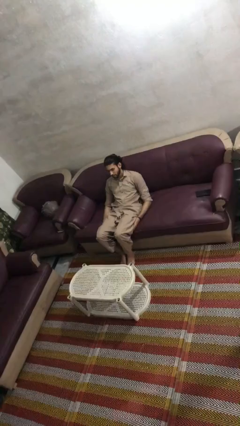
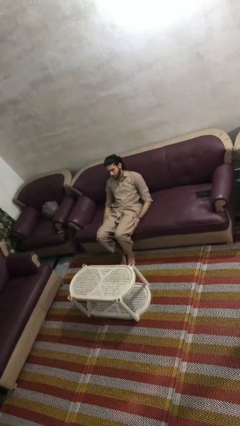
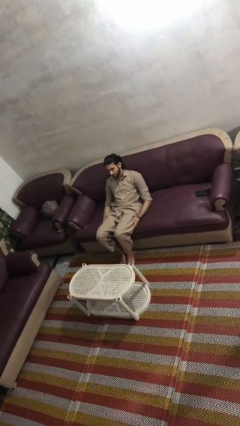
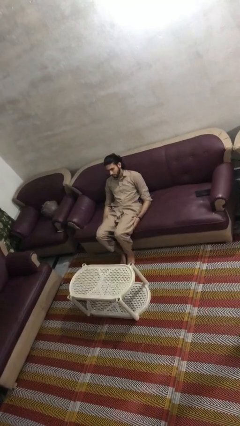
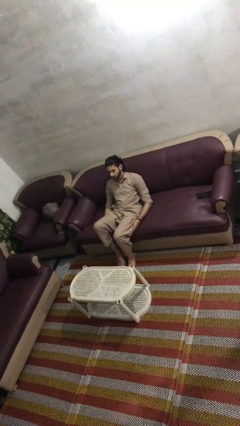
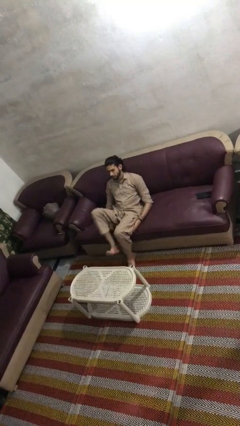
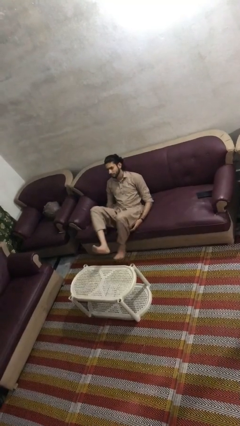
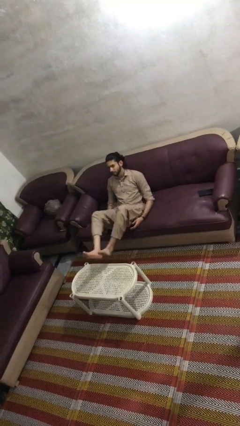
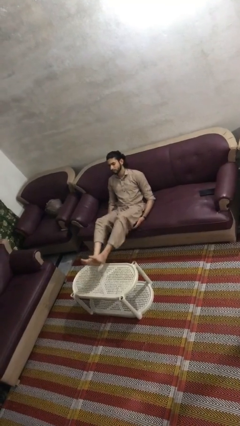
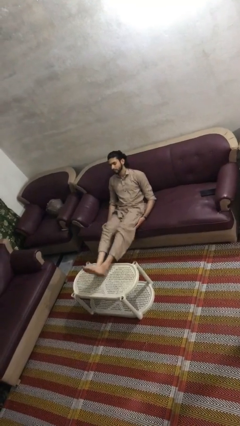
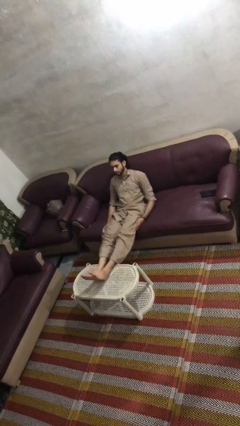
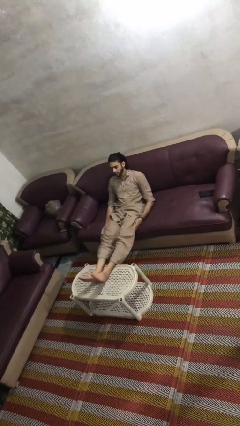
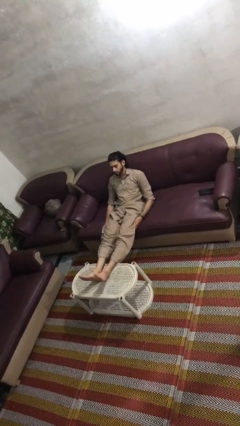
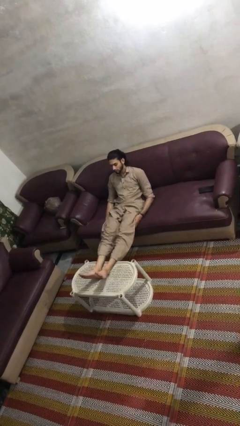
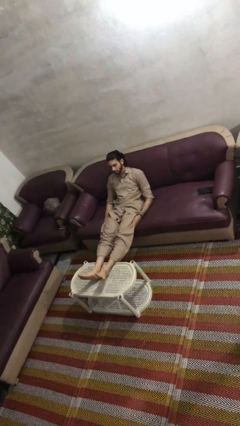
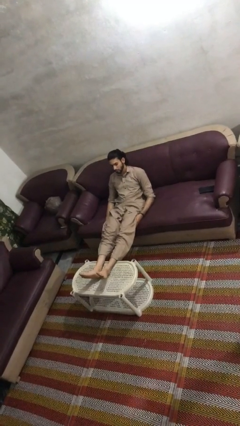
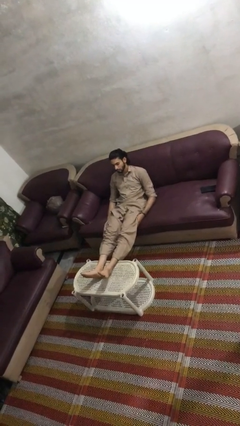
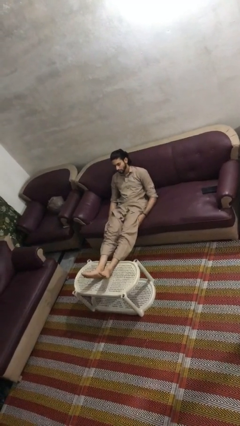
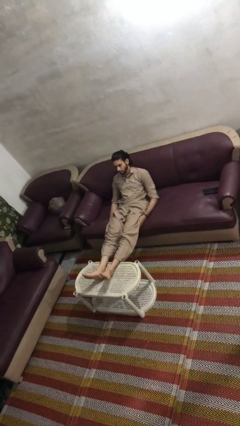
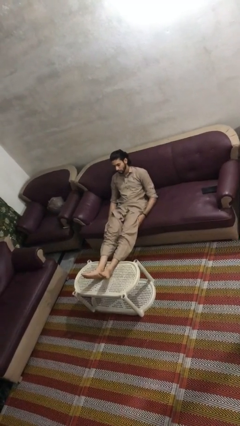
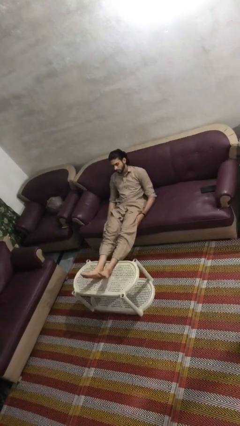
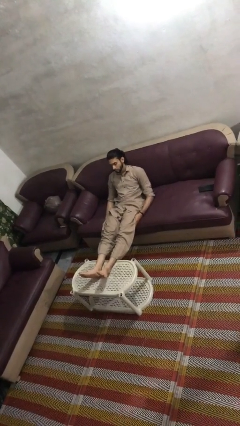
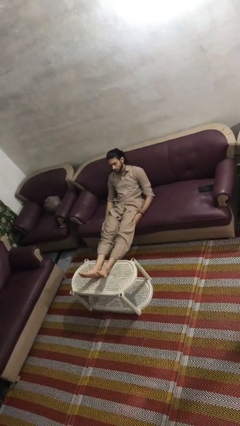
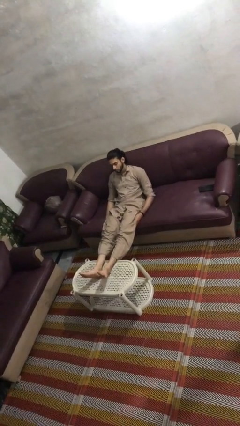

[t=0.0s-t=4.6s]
person puts feet up

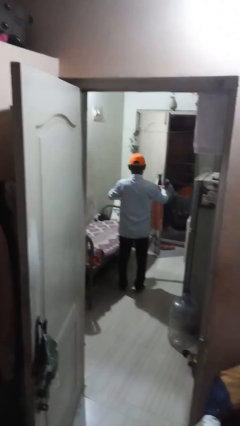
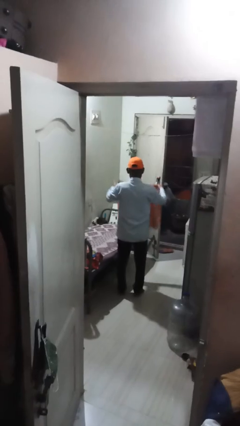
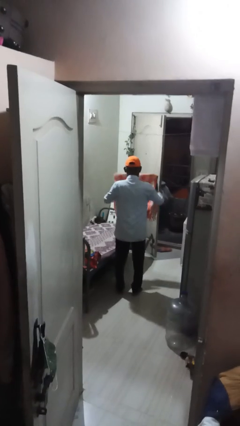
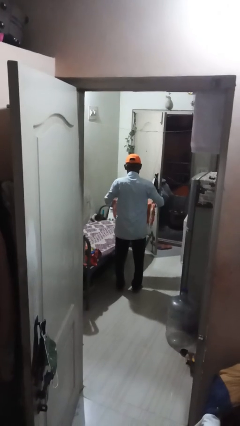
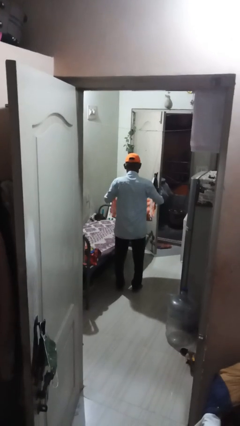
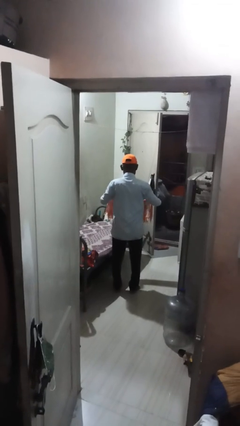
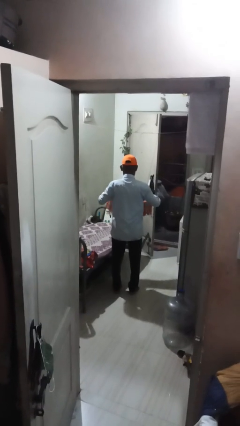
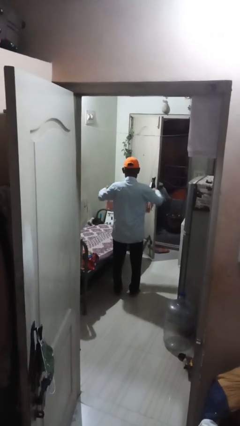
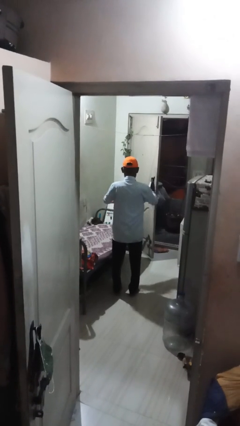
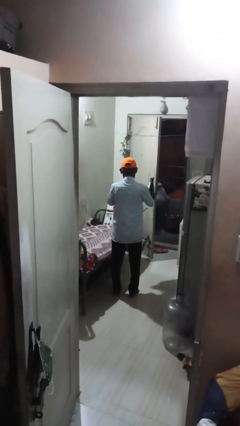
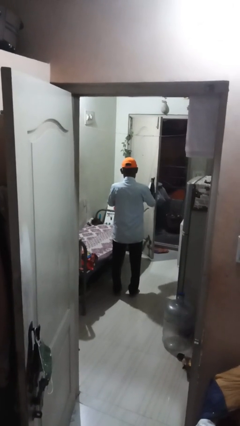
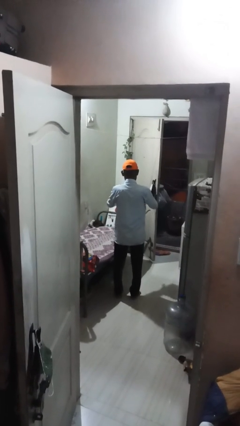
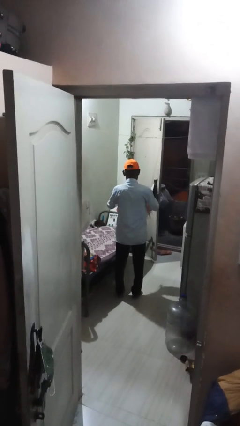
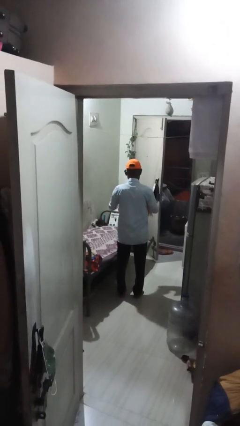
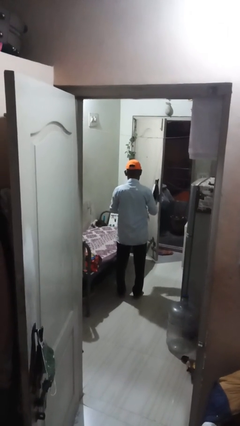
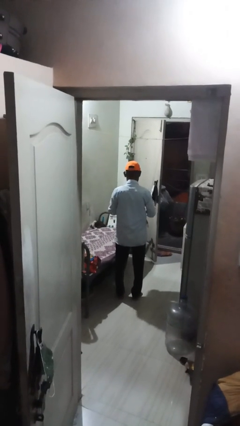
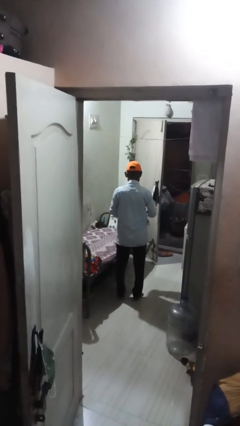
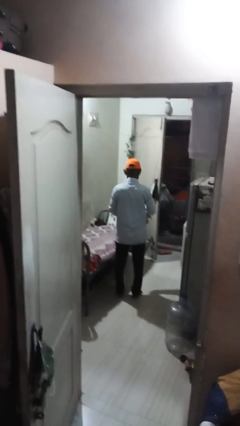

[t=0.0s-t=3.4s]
person folds towel

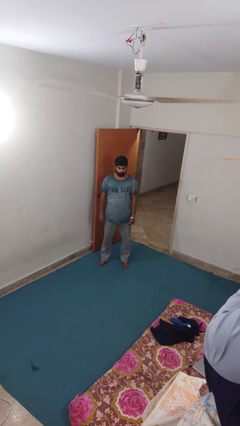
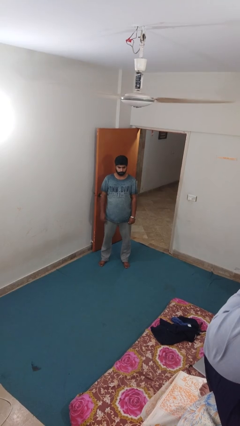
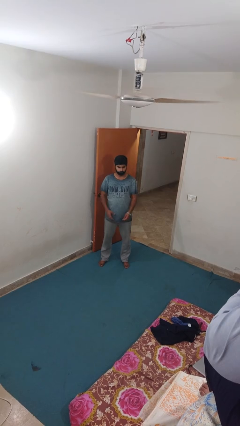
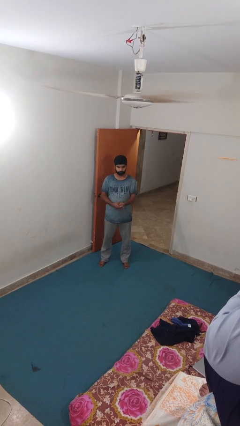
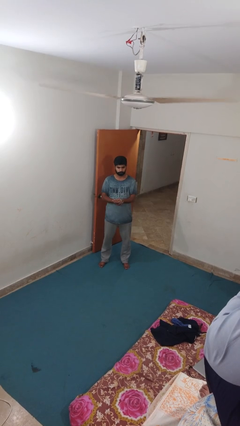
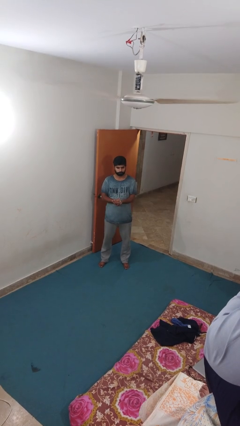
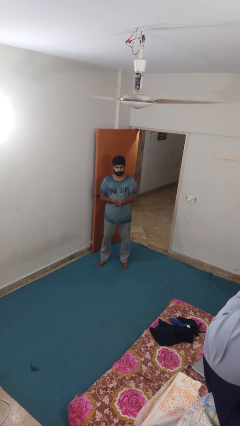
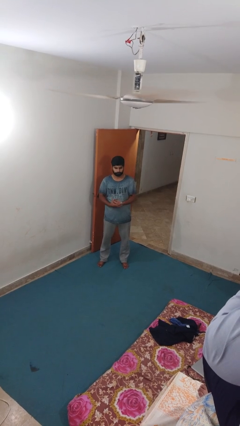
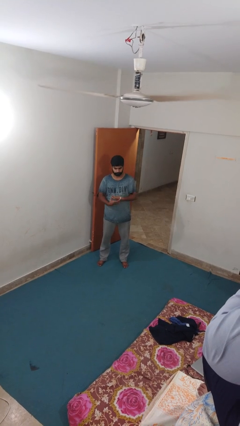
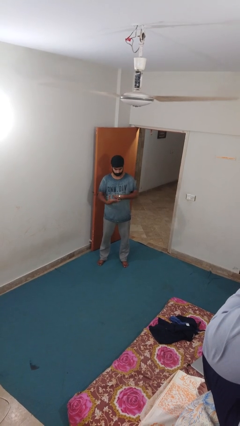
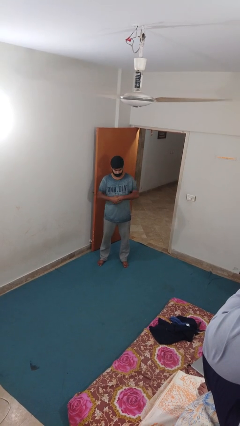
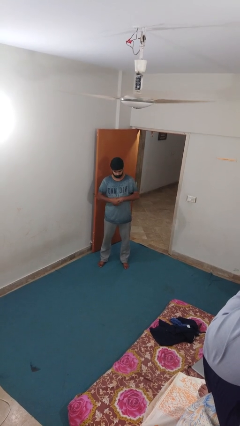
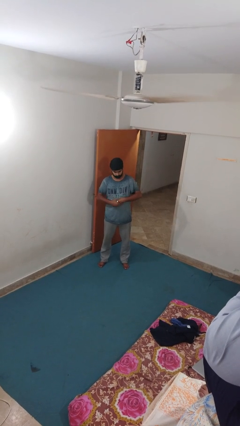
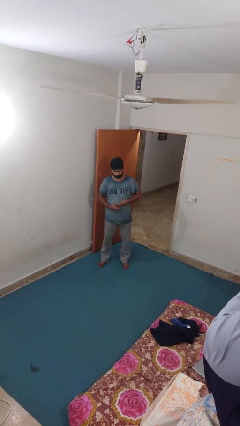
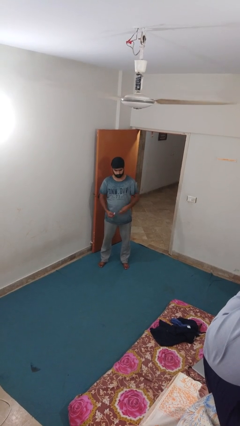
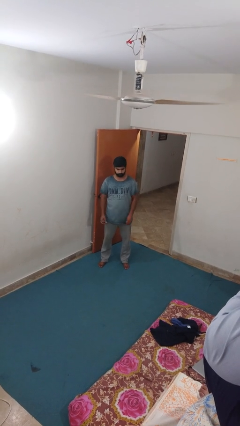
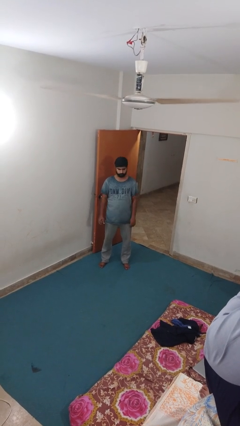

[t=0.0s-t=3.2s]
person takes off wristwatch

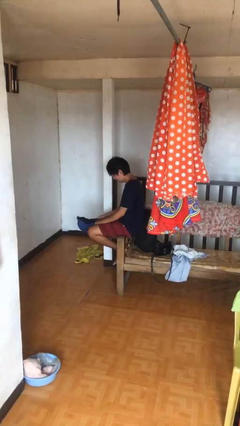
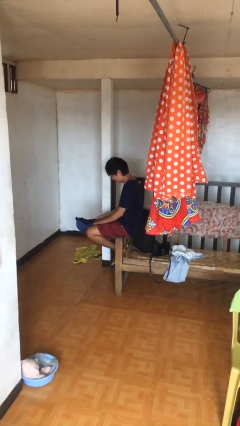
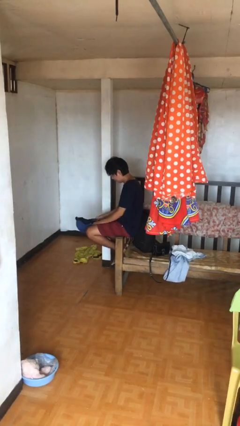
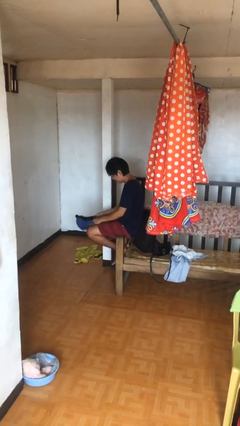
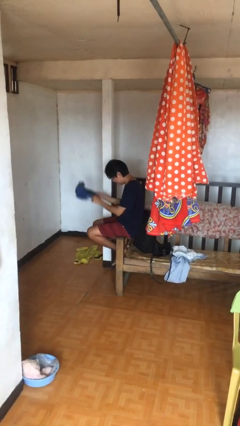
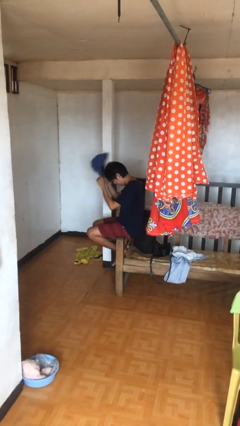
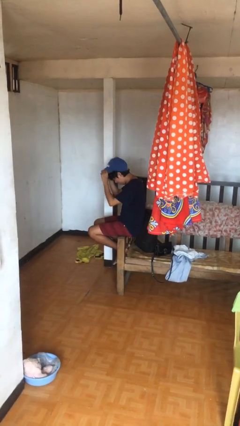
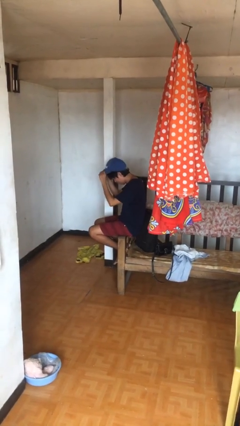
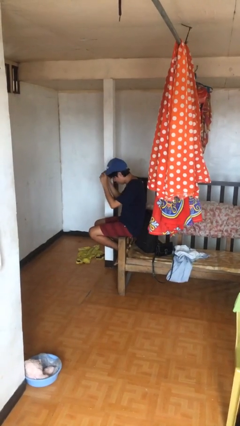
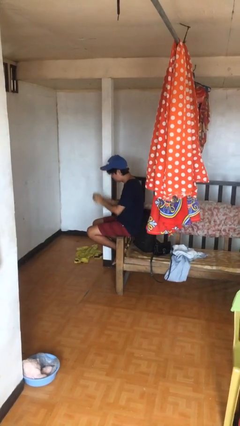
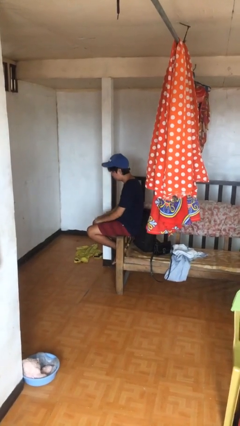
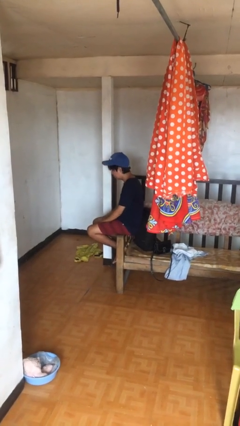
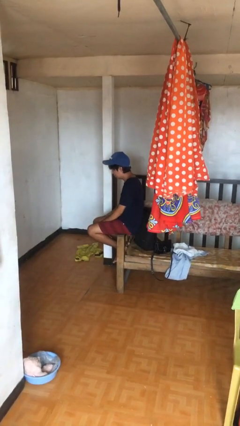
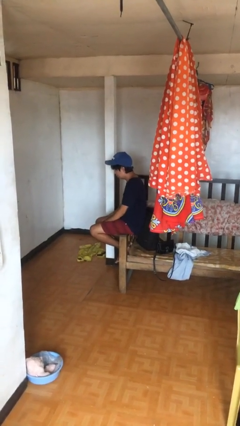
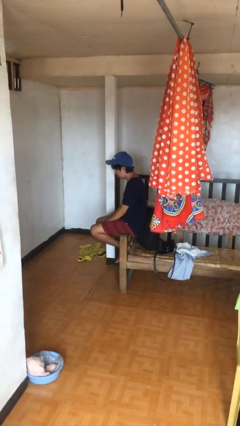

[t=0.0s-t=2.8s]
person puts on hat

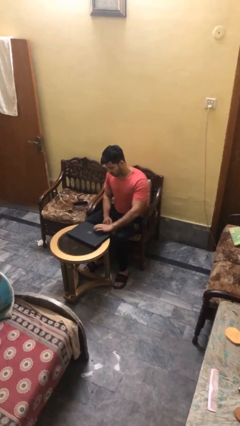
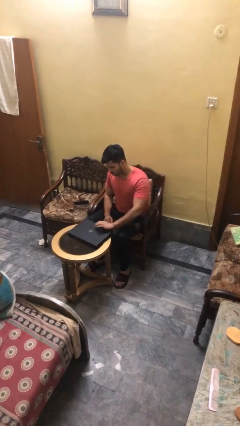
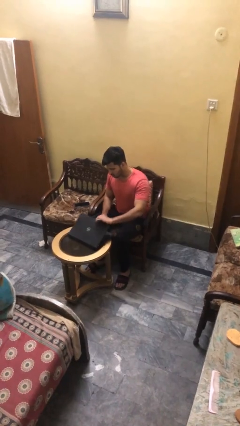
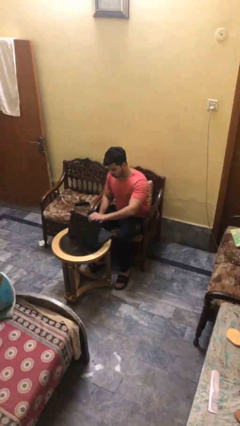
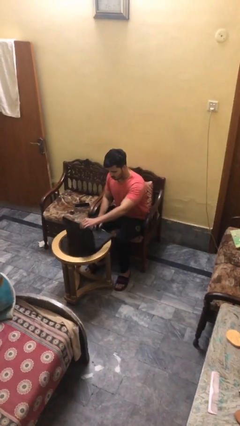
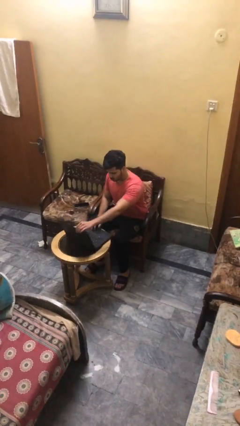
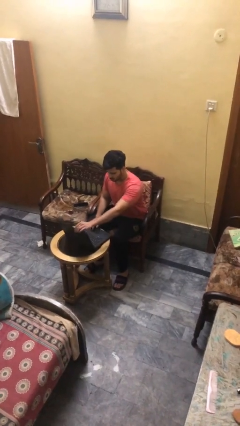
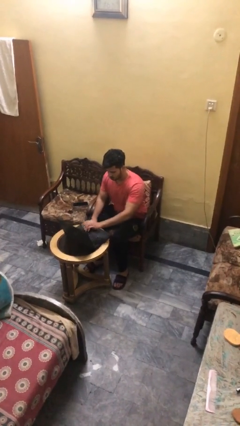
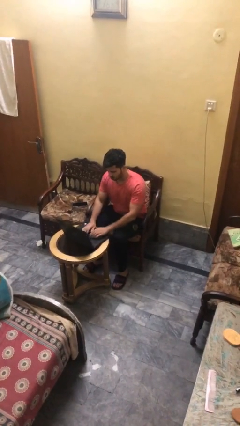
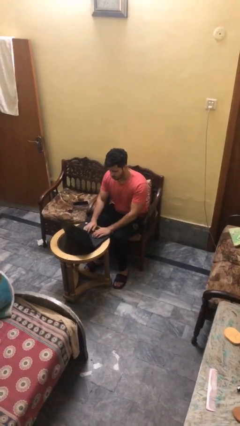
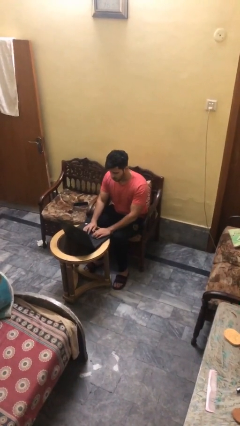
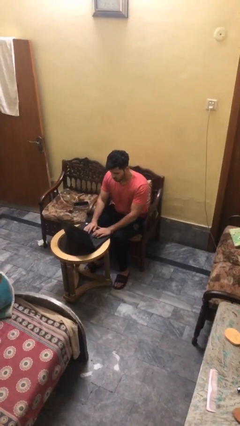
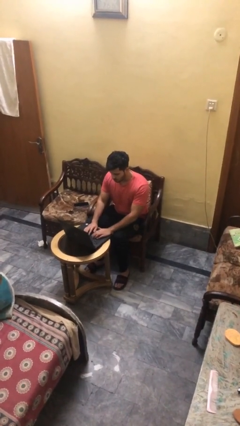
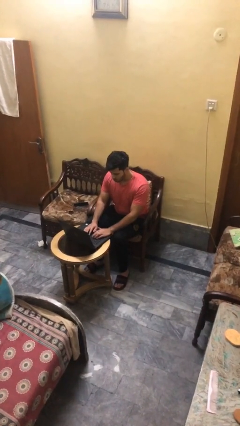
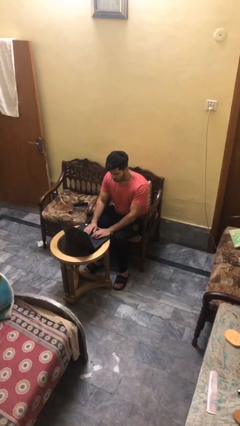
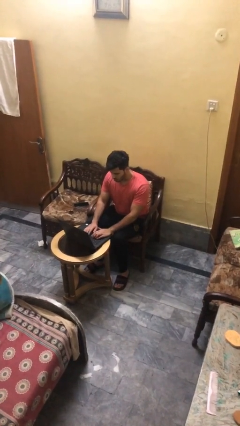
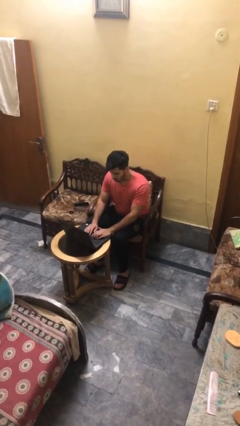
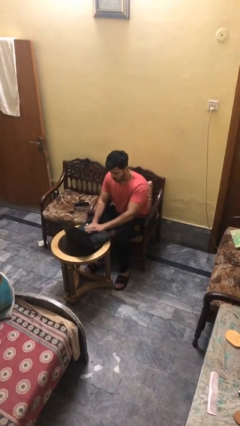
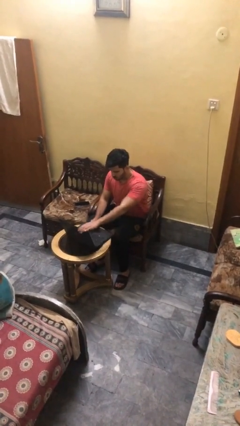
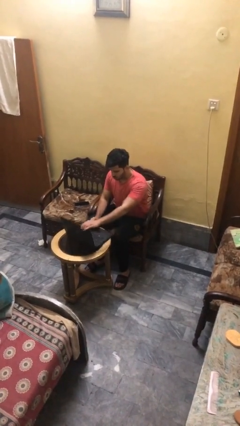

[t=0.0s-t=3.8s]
person interacts with laptop
